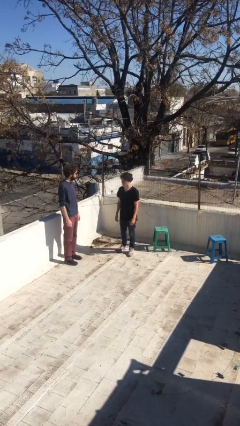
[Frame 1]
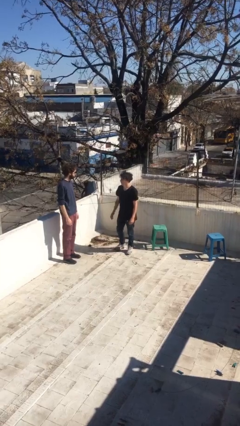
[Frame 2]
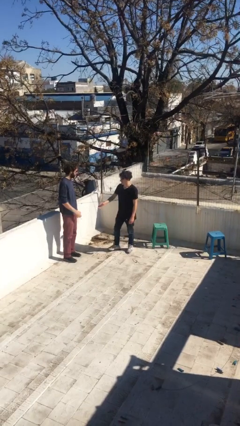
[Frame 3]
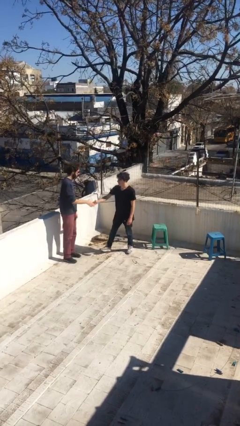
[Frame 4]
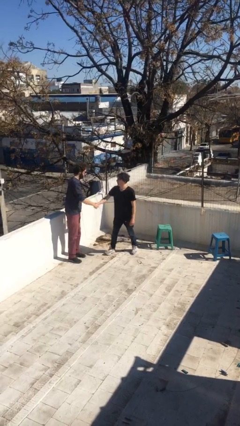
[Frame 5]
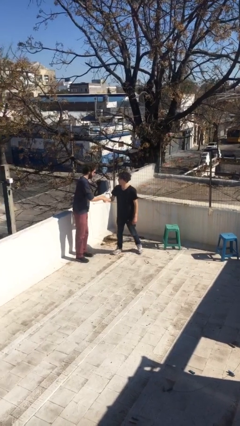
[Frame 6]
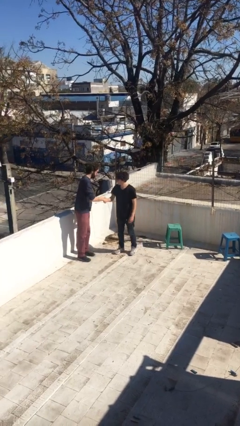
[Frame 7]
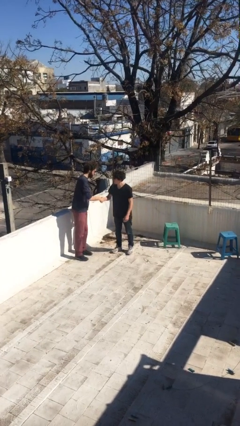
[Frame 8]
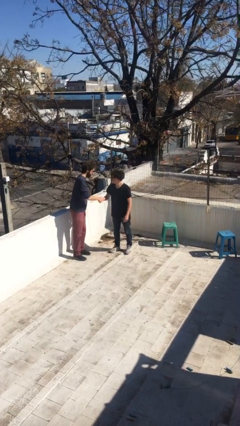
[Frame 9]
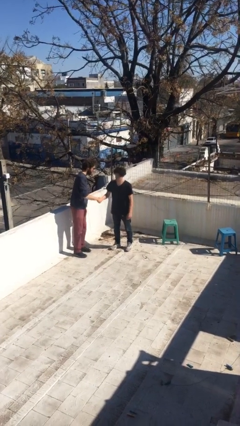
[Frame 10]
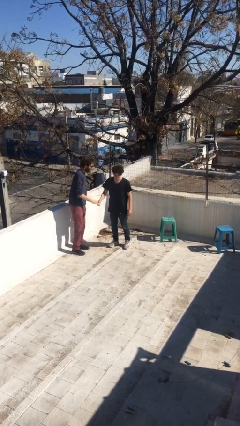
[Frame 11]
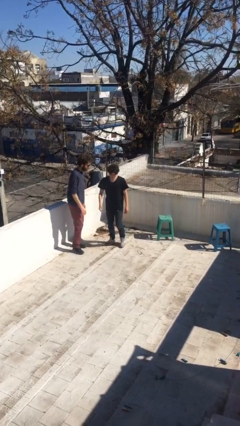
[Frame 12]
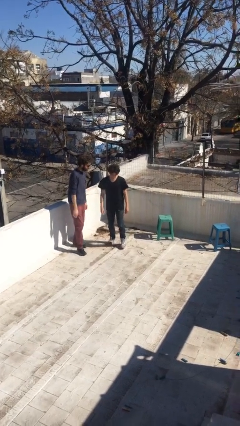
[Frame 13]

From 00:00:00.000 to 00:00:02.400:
person shakes hand

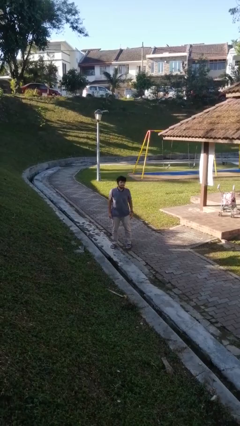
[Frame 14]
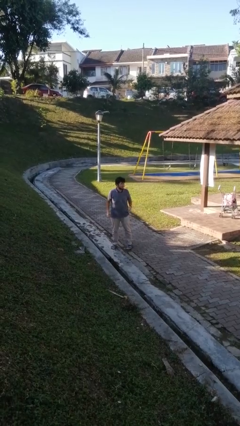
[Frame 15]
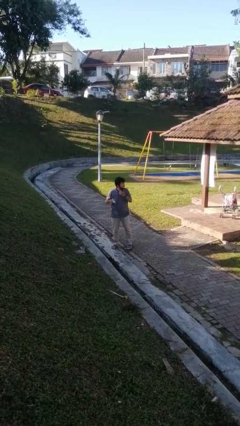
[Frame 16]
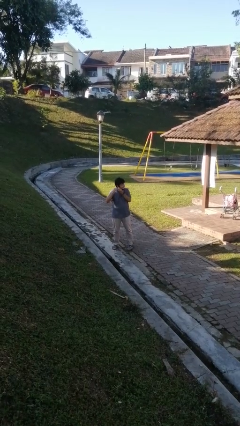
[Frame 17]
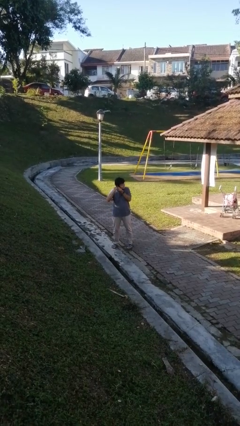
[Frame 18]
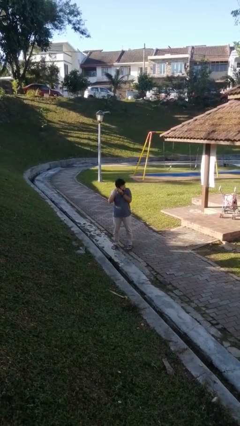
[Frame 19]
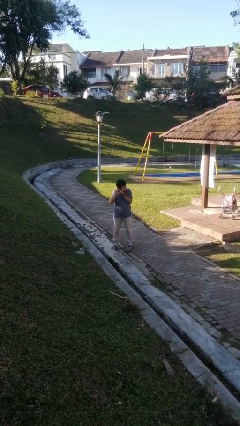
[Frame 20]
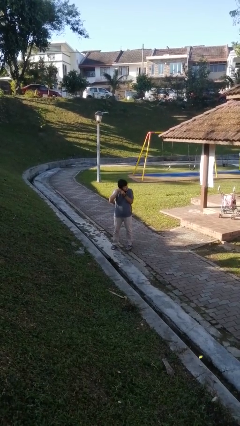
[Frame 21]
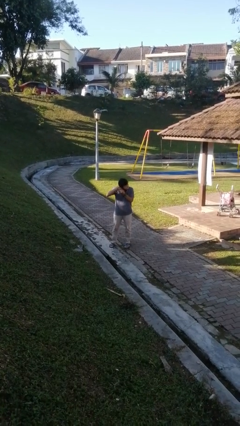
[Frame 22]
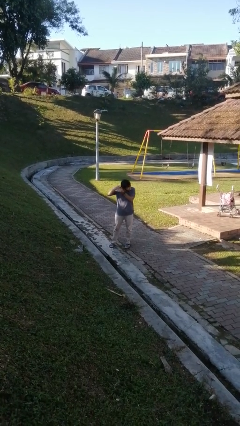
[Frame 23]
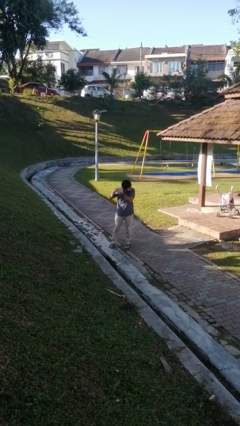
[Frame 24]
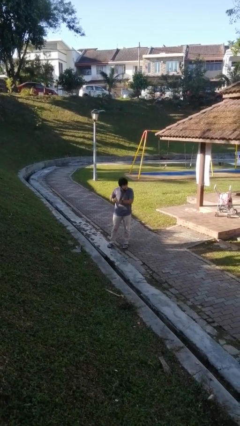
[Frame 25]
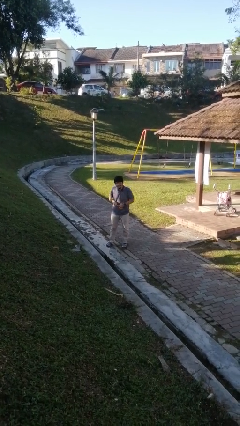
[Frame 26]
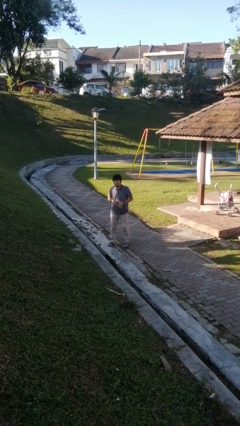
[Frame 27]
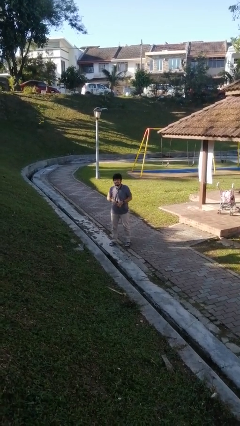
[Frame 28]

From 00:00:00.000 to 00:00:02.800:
person takes off earrings

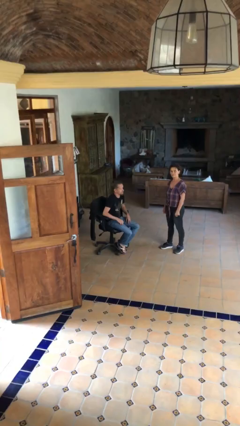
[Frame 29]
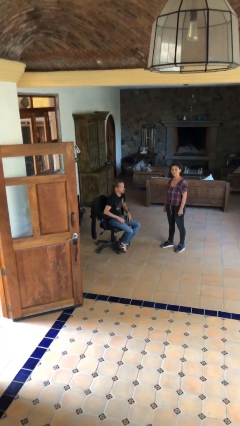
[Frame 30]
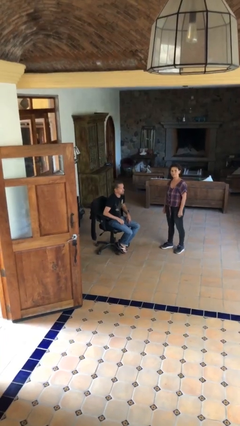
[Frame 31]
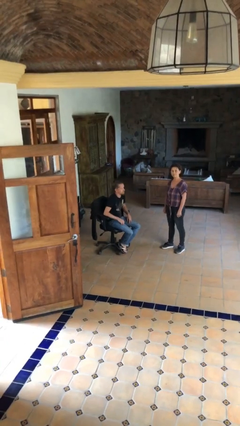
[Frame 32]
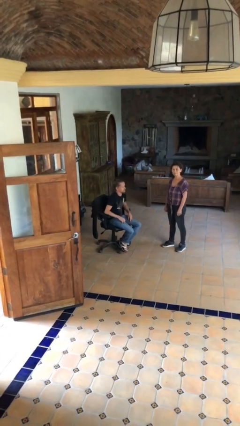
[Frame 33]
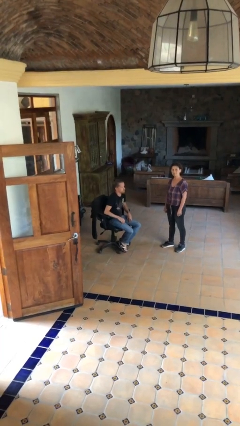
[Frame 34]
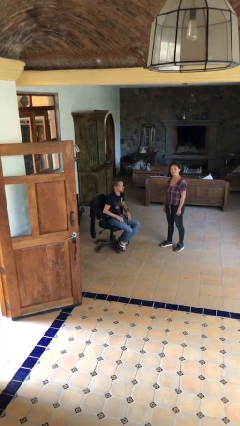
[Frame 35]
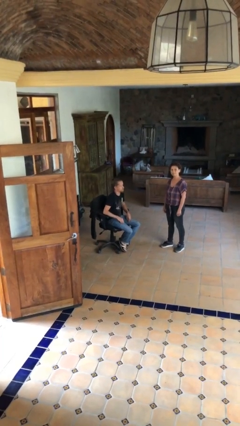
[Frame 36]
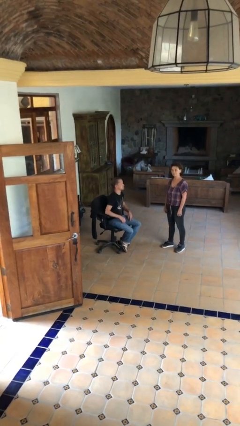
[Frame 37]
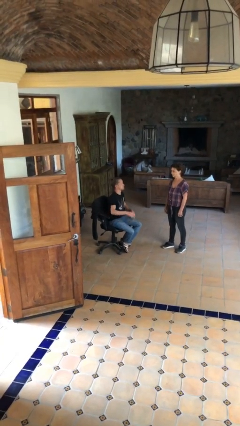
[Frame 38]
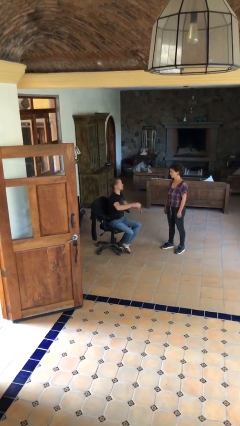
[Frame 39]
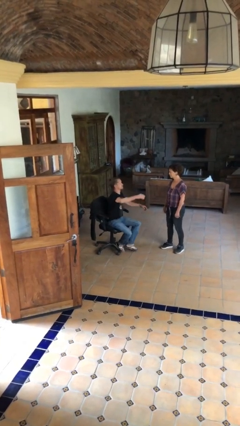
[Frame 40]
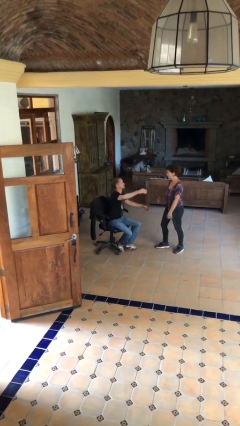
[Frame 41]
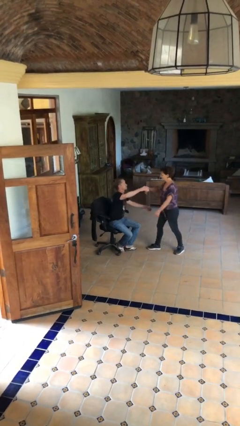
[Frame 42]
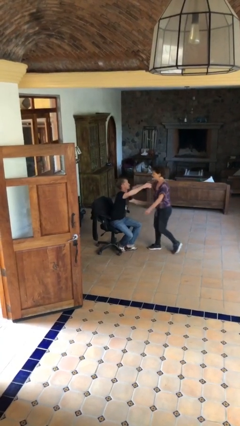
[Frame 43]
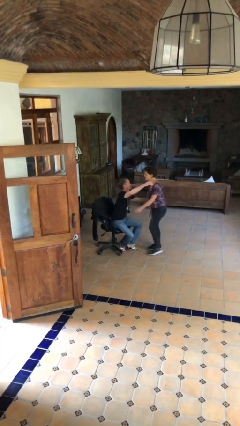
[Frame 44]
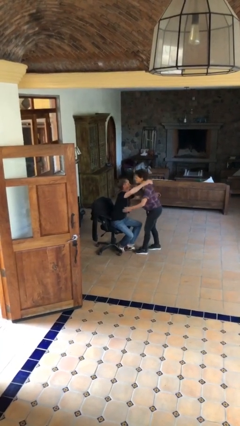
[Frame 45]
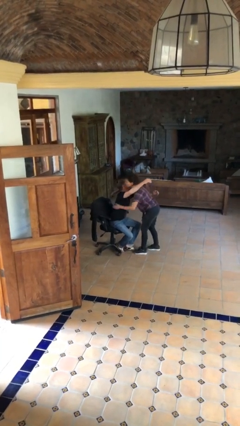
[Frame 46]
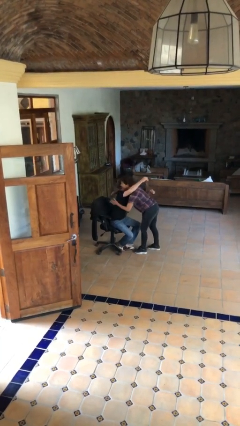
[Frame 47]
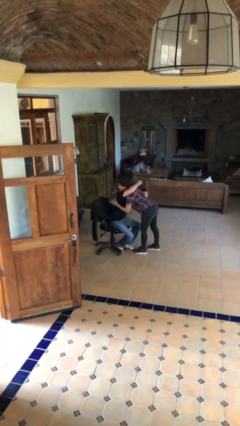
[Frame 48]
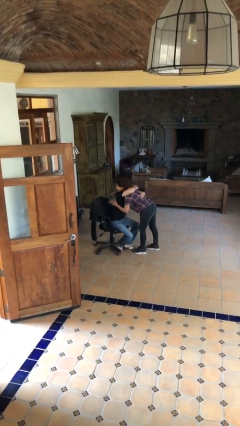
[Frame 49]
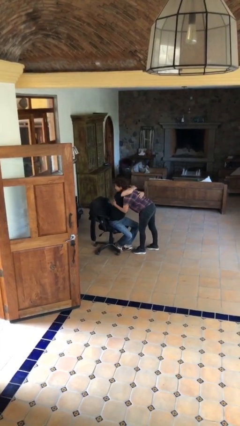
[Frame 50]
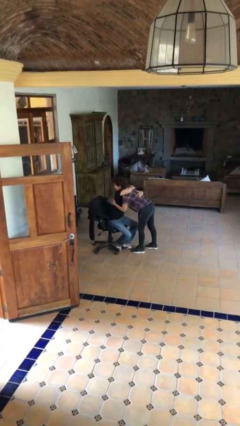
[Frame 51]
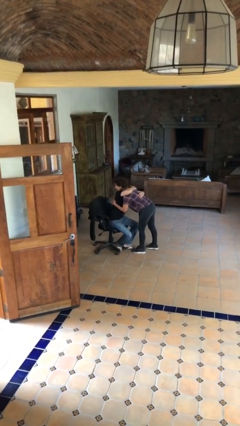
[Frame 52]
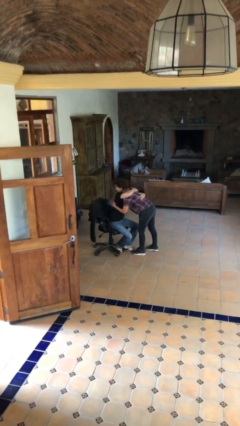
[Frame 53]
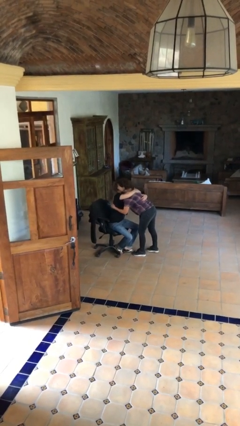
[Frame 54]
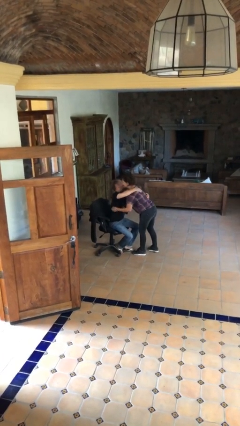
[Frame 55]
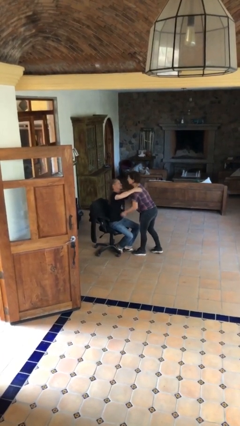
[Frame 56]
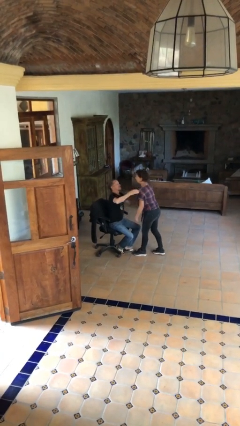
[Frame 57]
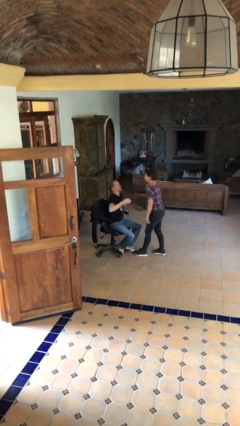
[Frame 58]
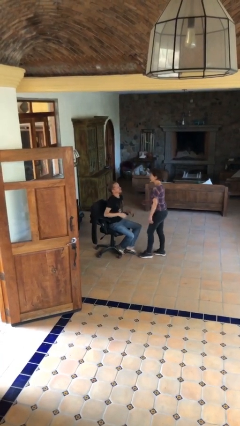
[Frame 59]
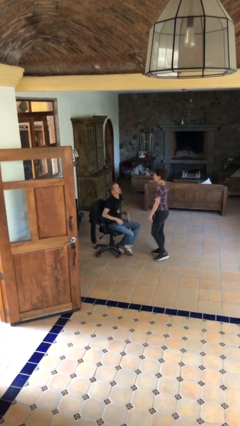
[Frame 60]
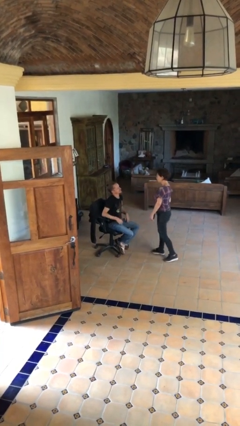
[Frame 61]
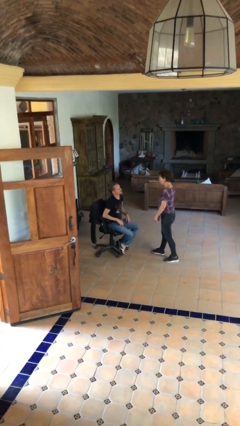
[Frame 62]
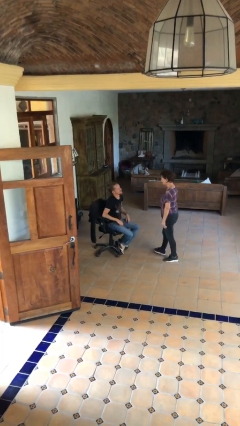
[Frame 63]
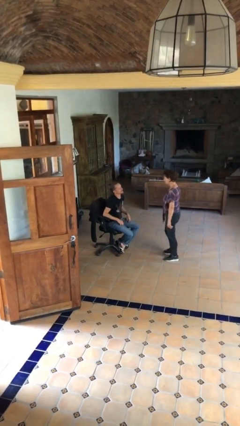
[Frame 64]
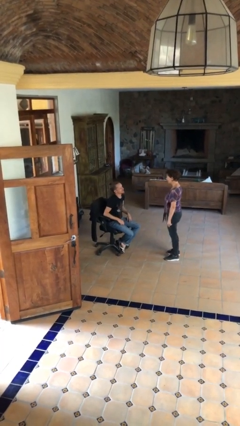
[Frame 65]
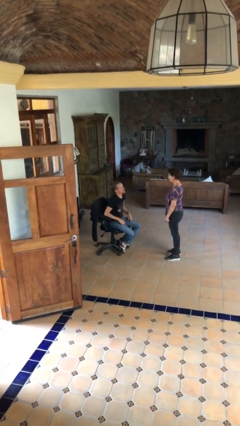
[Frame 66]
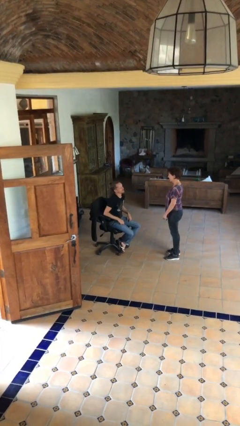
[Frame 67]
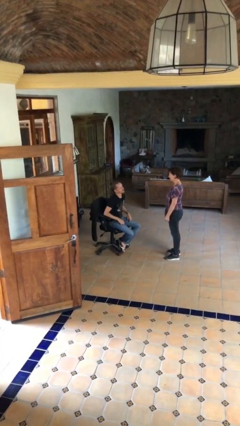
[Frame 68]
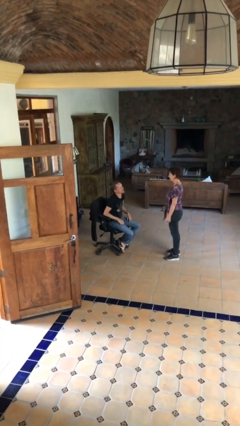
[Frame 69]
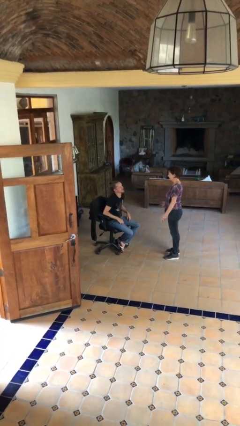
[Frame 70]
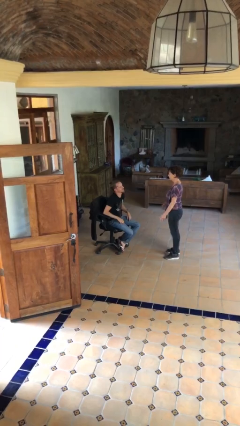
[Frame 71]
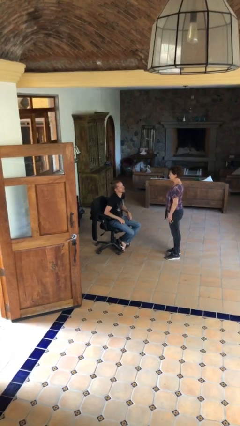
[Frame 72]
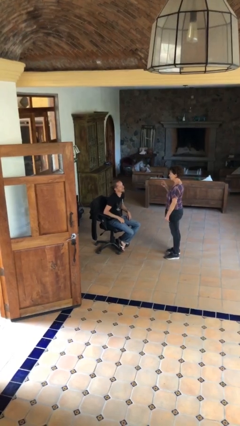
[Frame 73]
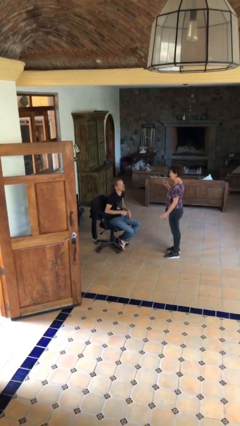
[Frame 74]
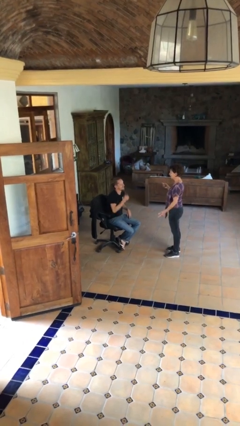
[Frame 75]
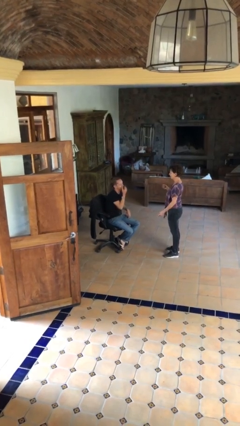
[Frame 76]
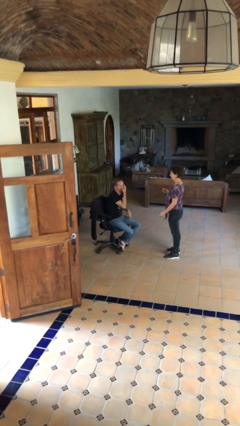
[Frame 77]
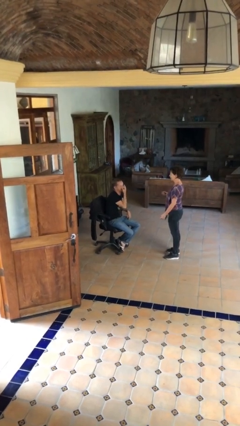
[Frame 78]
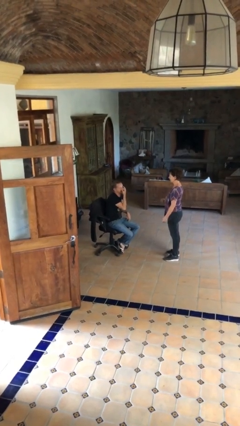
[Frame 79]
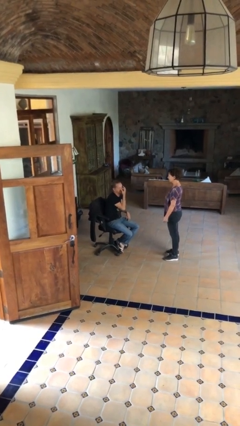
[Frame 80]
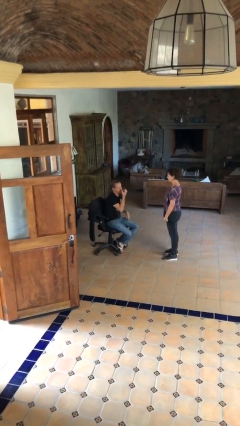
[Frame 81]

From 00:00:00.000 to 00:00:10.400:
person embraces person

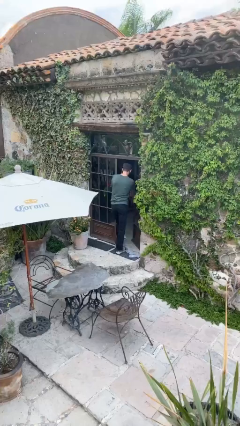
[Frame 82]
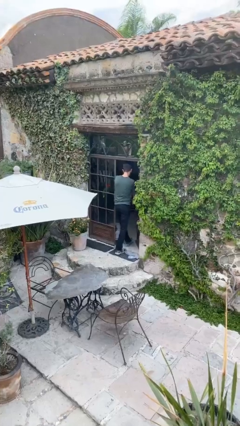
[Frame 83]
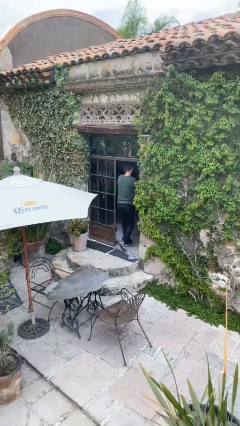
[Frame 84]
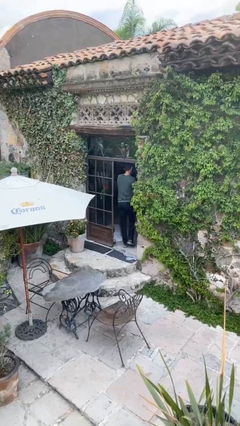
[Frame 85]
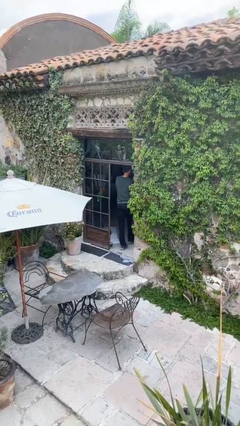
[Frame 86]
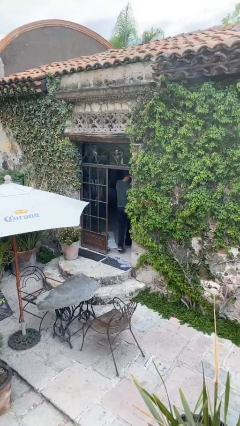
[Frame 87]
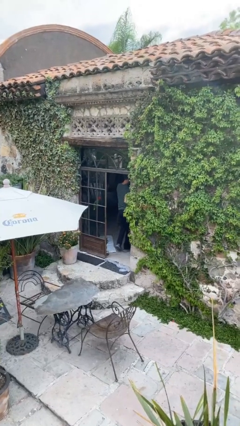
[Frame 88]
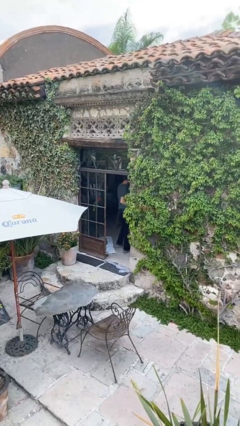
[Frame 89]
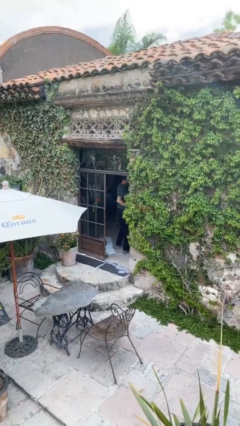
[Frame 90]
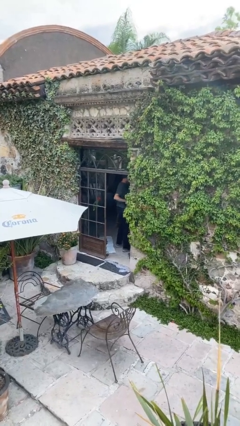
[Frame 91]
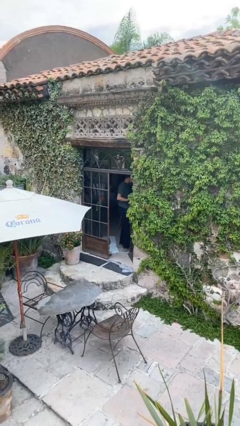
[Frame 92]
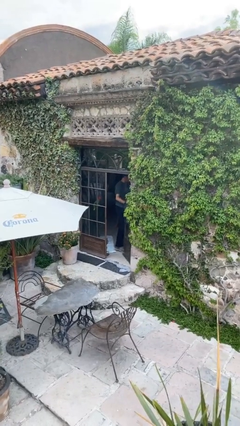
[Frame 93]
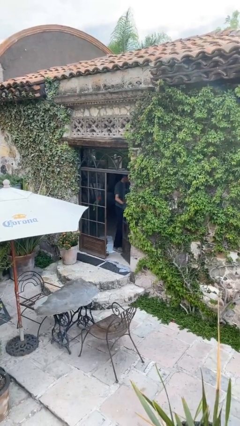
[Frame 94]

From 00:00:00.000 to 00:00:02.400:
person exits scene through structure
